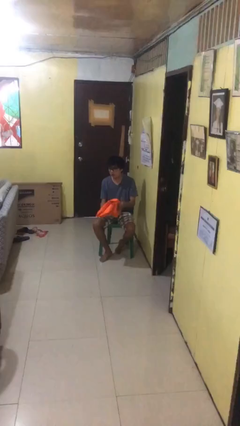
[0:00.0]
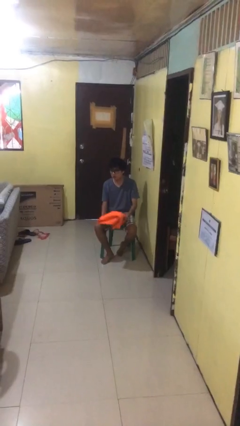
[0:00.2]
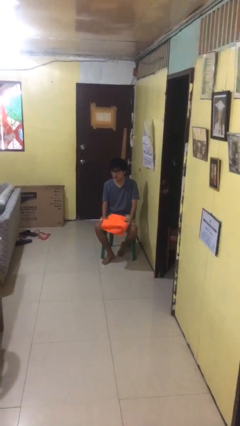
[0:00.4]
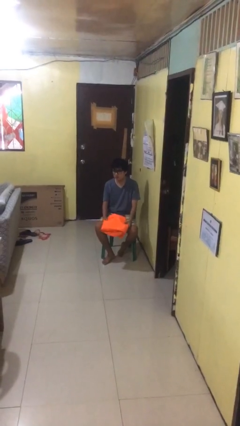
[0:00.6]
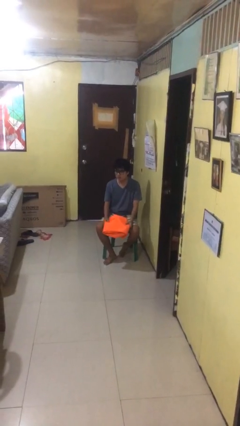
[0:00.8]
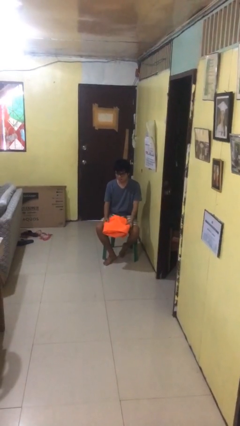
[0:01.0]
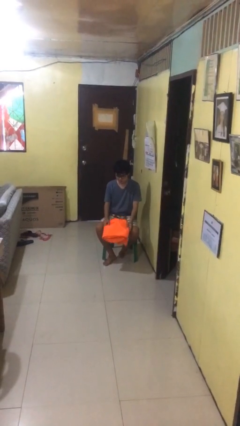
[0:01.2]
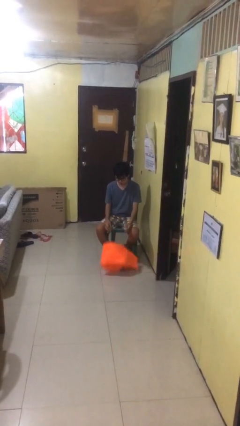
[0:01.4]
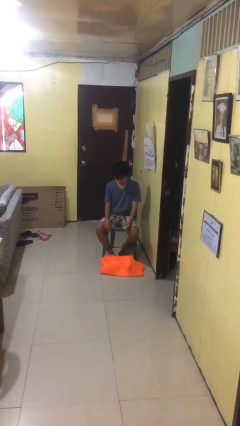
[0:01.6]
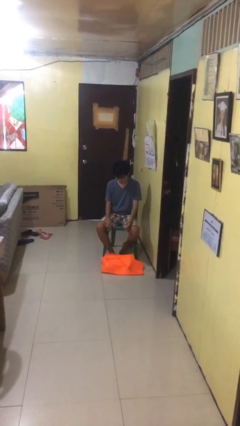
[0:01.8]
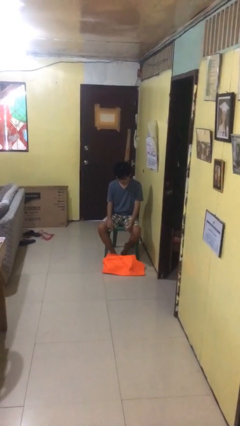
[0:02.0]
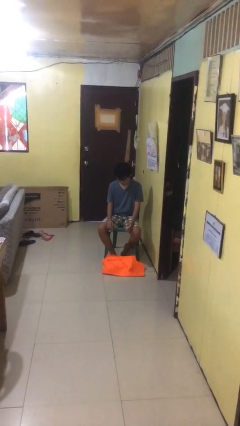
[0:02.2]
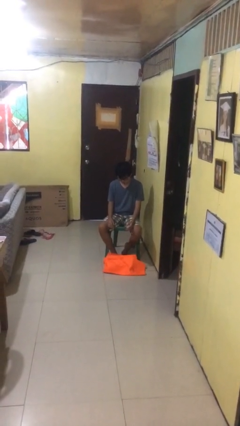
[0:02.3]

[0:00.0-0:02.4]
person drops object

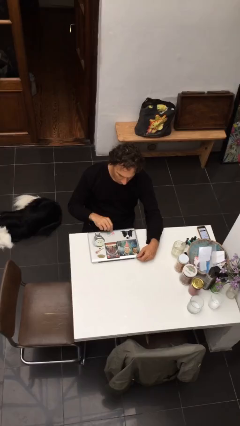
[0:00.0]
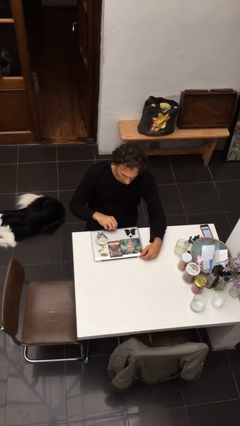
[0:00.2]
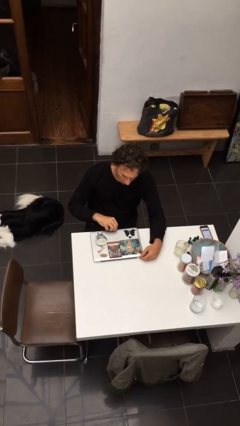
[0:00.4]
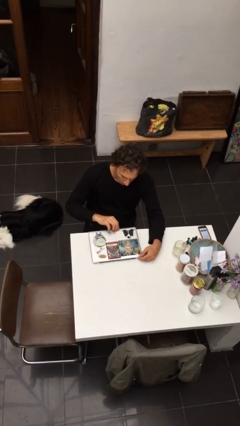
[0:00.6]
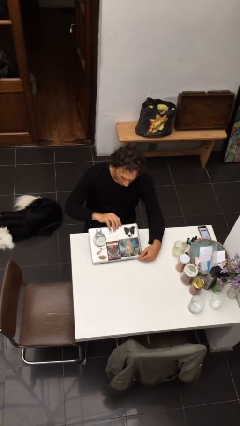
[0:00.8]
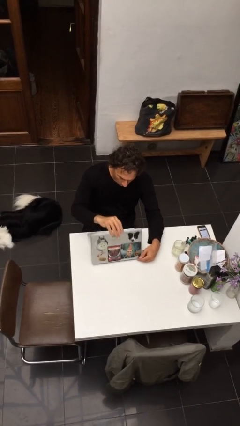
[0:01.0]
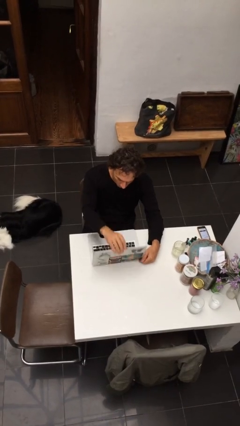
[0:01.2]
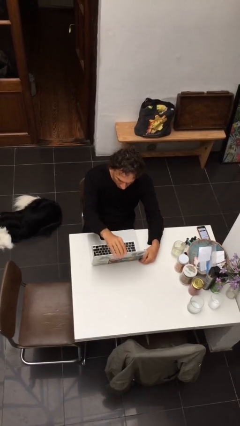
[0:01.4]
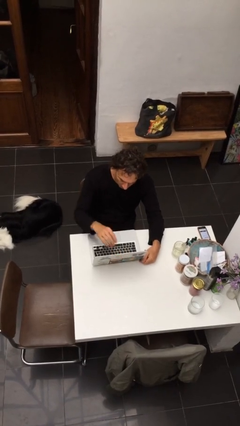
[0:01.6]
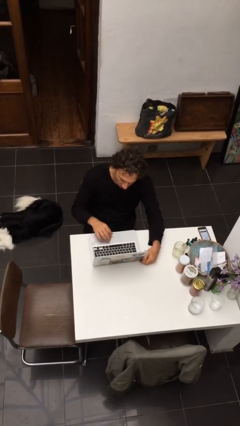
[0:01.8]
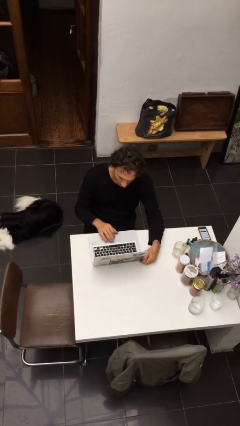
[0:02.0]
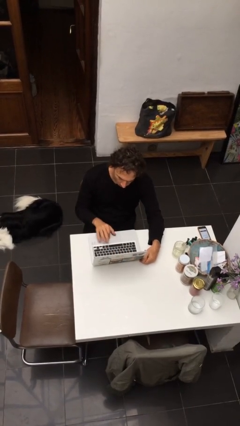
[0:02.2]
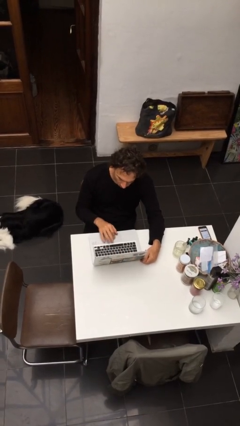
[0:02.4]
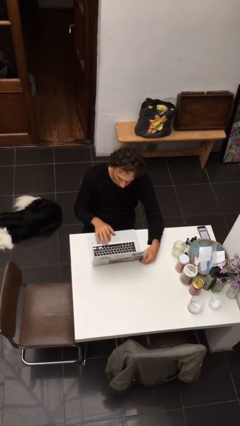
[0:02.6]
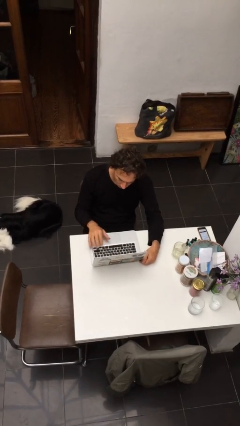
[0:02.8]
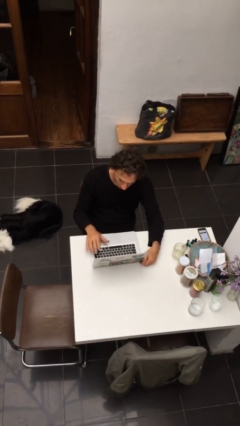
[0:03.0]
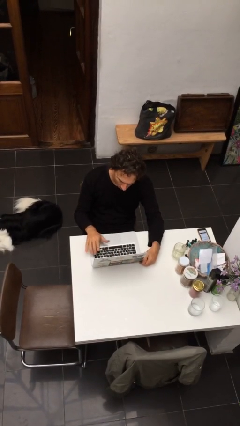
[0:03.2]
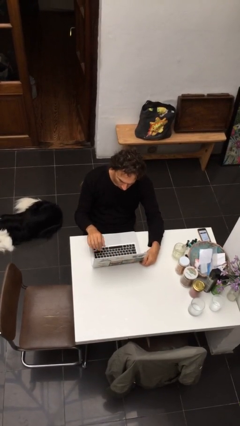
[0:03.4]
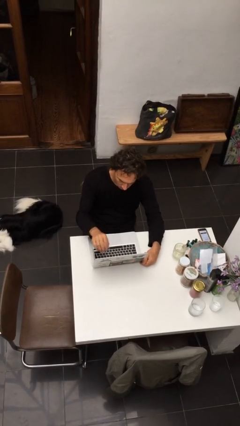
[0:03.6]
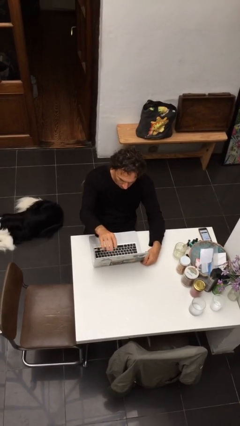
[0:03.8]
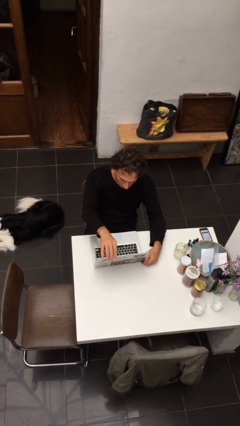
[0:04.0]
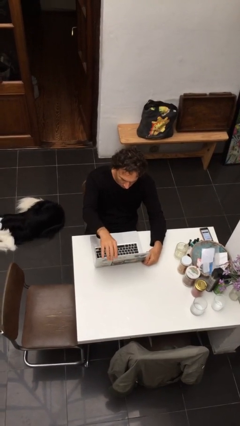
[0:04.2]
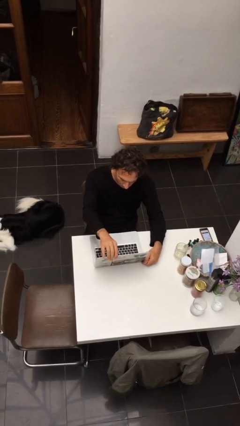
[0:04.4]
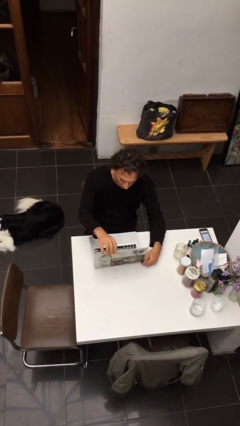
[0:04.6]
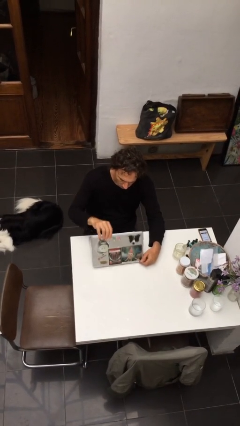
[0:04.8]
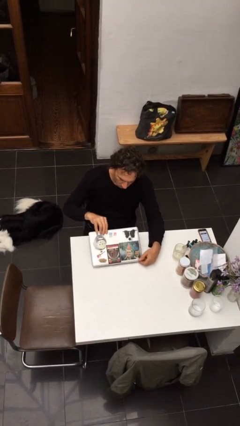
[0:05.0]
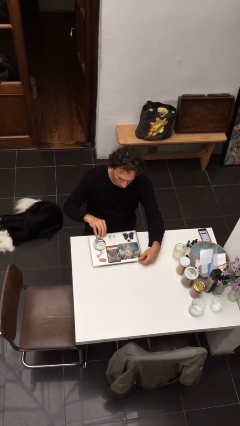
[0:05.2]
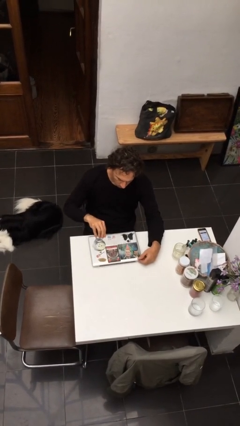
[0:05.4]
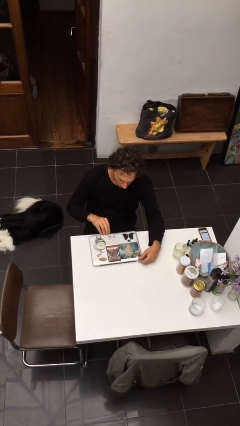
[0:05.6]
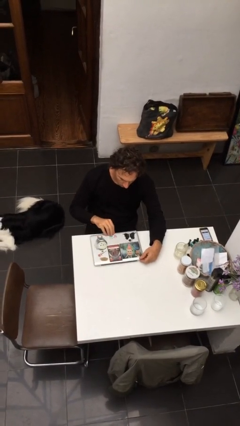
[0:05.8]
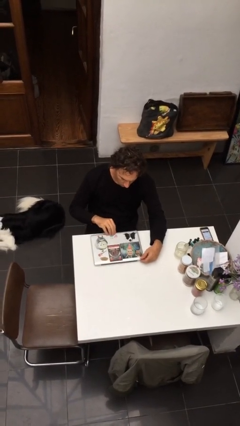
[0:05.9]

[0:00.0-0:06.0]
person interacts with laptop

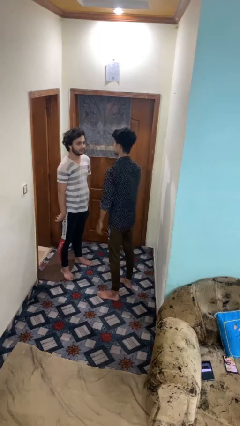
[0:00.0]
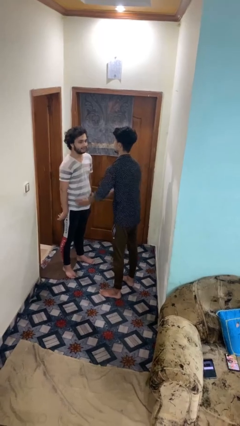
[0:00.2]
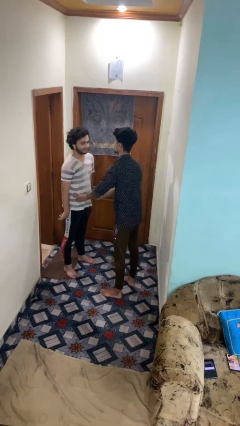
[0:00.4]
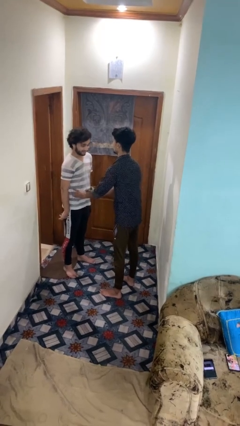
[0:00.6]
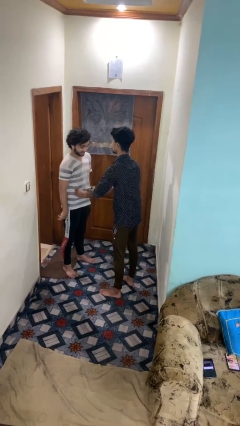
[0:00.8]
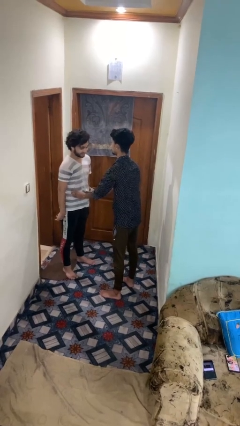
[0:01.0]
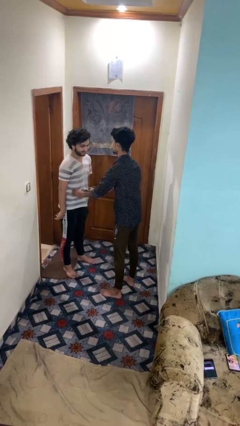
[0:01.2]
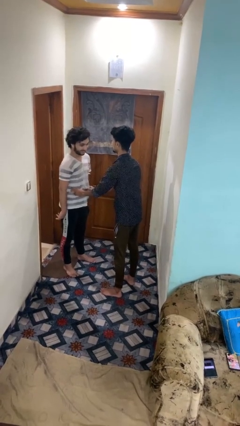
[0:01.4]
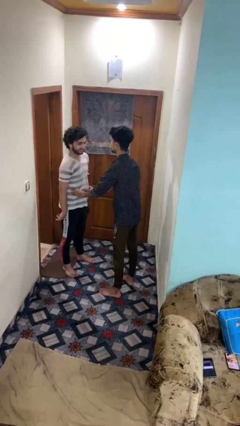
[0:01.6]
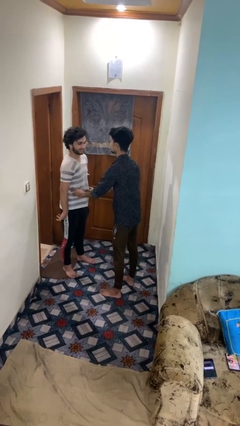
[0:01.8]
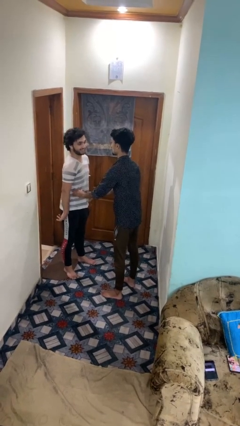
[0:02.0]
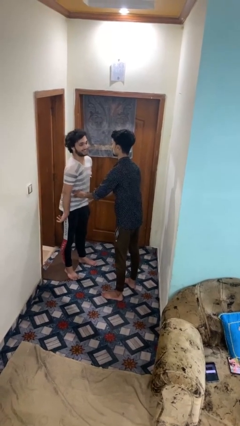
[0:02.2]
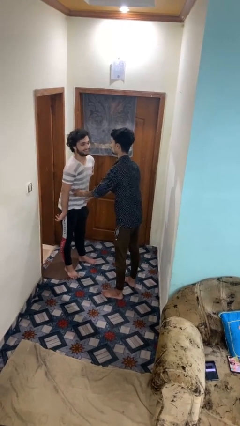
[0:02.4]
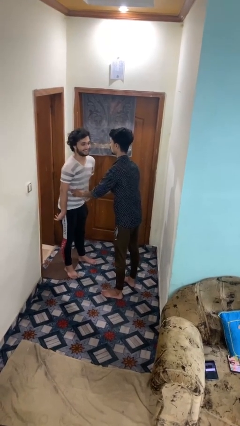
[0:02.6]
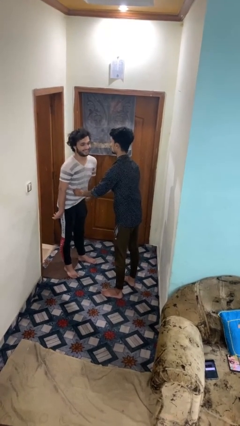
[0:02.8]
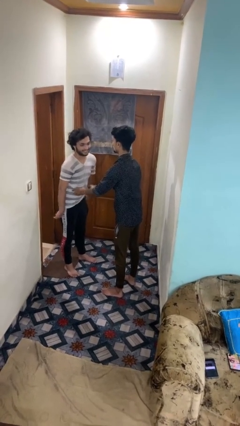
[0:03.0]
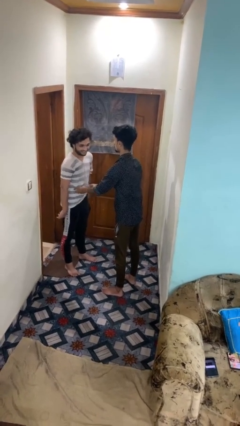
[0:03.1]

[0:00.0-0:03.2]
person tickles person

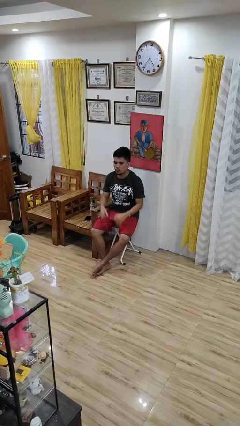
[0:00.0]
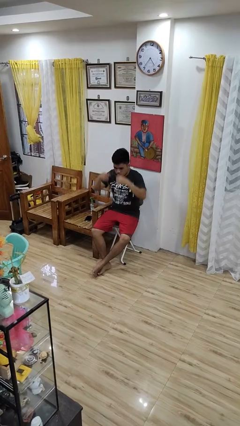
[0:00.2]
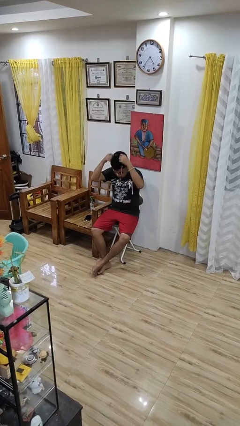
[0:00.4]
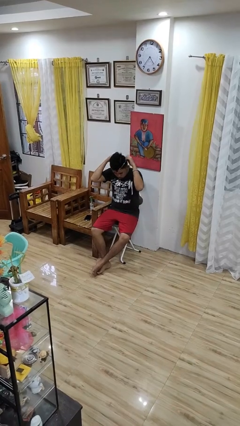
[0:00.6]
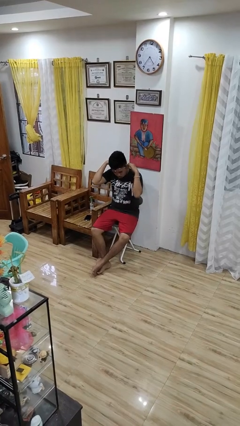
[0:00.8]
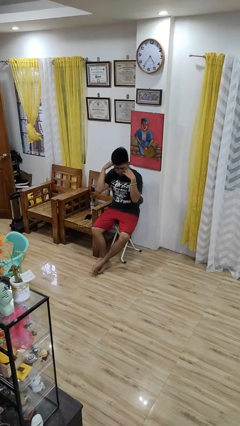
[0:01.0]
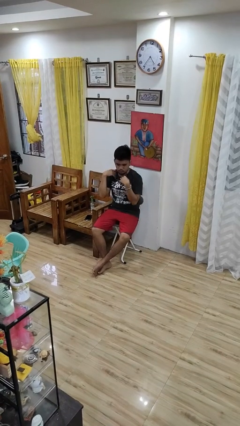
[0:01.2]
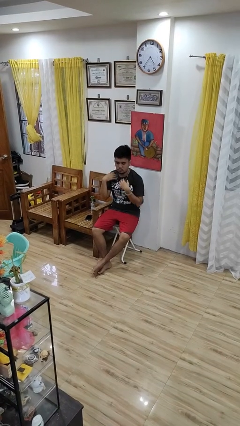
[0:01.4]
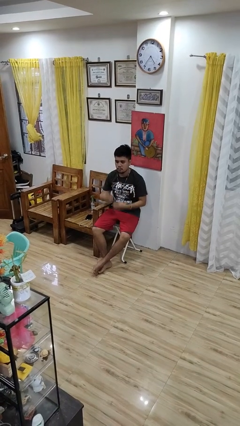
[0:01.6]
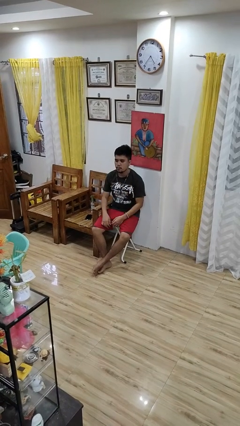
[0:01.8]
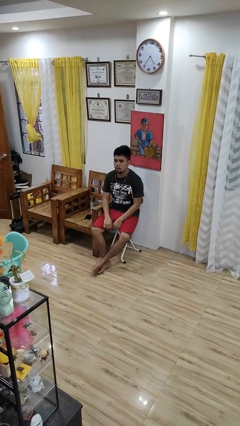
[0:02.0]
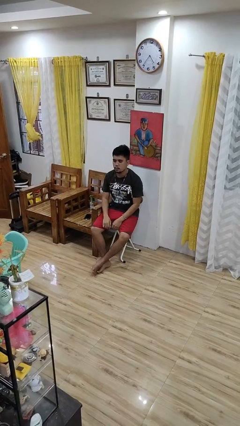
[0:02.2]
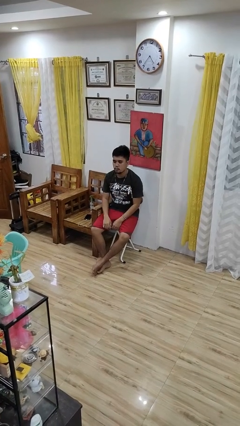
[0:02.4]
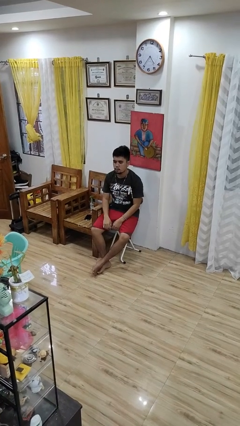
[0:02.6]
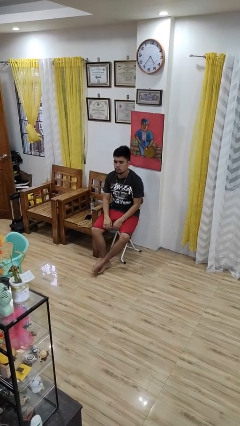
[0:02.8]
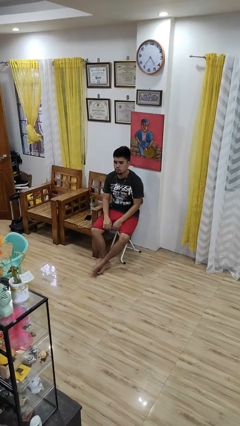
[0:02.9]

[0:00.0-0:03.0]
person puts on necklace

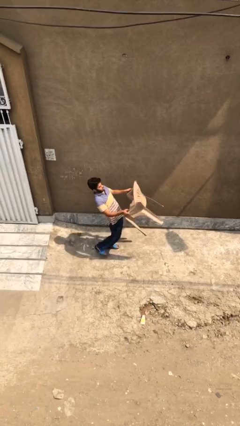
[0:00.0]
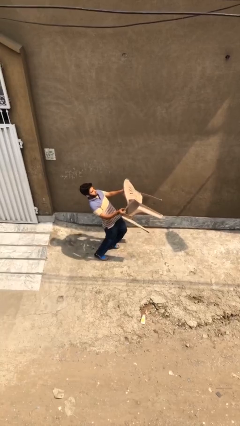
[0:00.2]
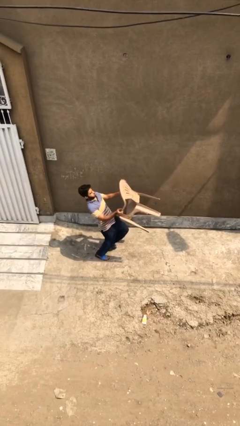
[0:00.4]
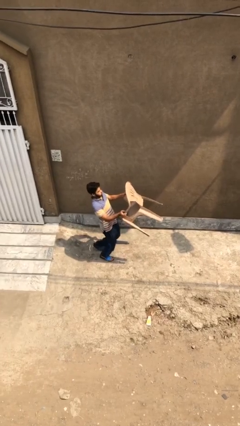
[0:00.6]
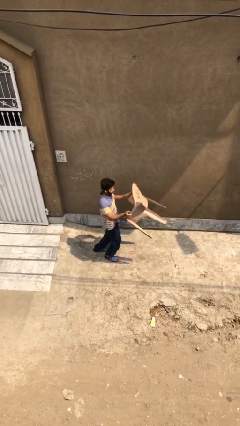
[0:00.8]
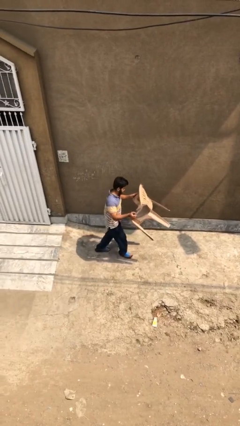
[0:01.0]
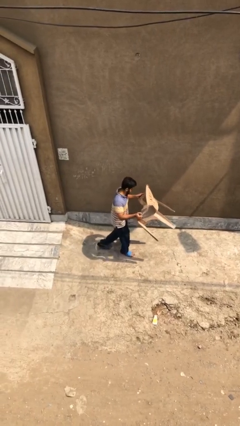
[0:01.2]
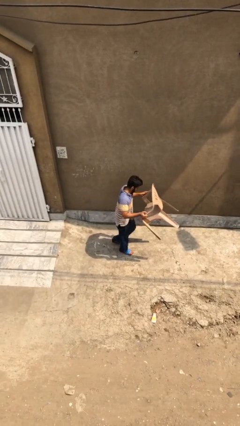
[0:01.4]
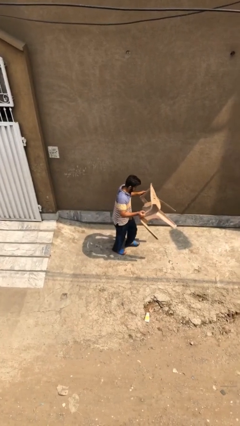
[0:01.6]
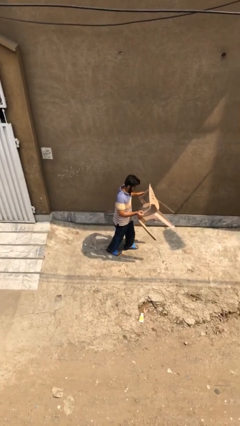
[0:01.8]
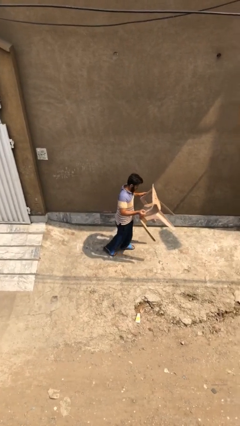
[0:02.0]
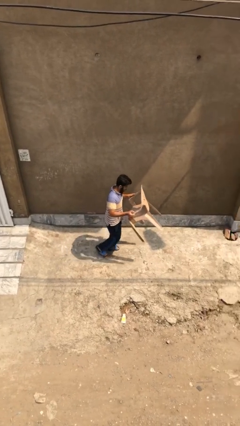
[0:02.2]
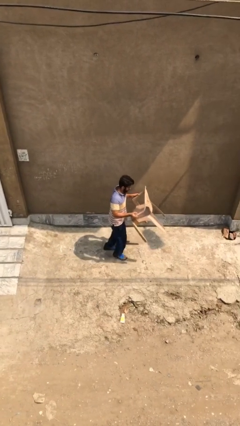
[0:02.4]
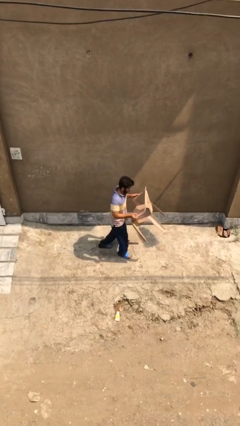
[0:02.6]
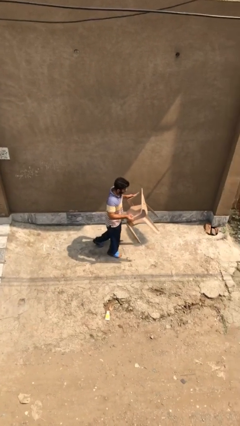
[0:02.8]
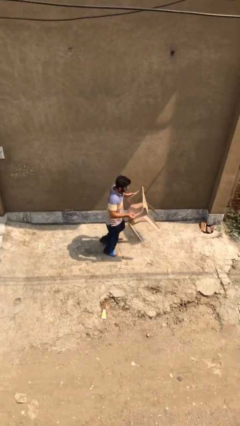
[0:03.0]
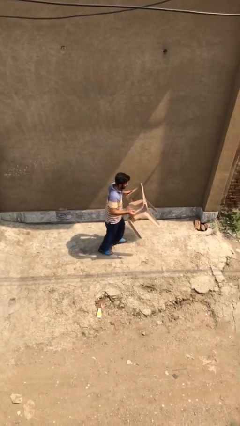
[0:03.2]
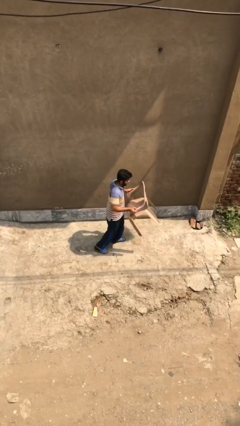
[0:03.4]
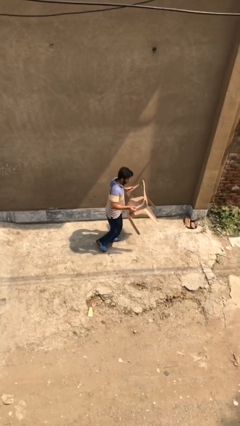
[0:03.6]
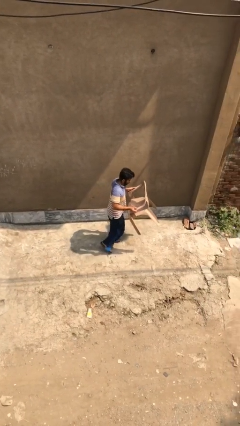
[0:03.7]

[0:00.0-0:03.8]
person carries heavy object
